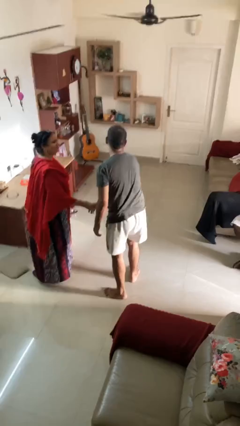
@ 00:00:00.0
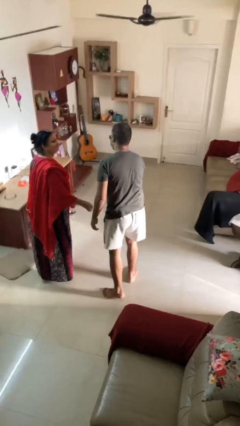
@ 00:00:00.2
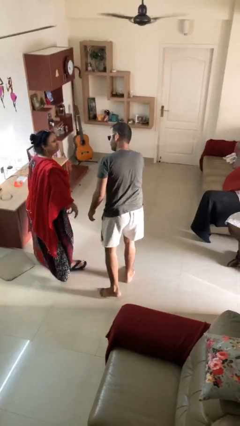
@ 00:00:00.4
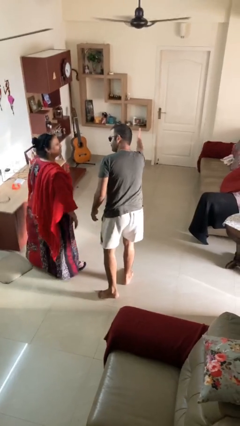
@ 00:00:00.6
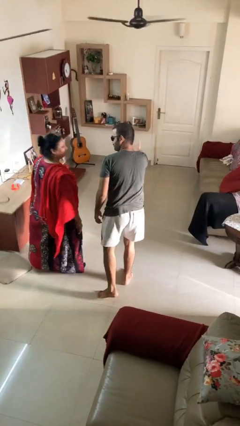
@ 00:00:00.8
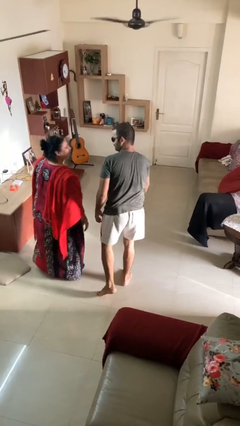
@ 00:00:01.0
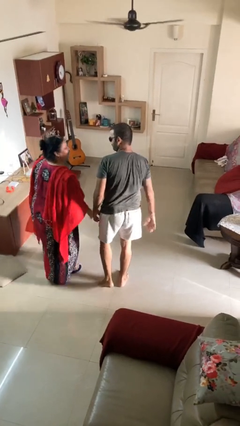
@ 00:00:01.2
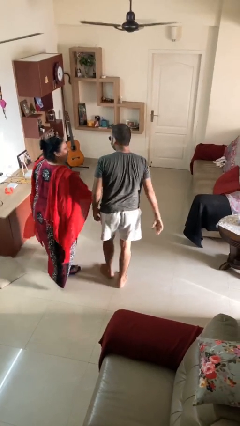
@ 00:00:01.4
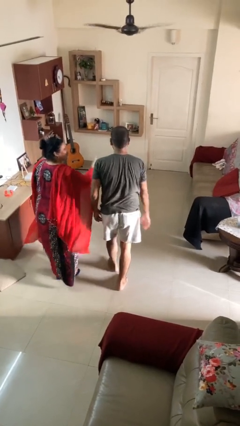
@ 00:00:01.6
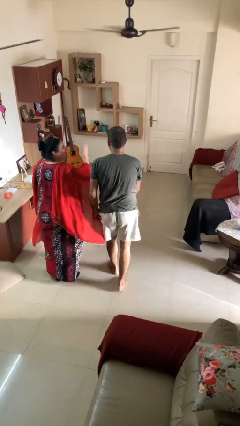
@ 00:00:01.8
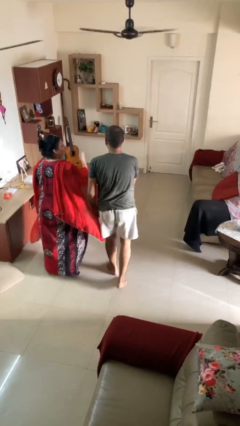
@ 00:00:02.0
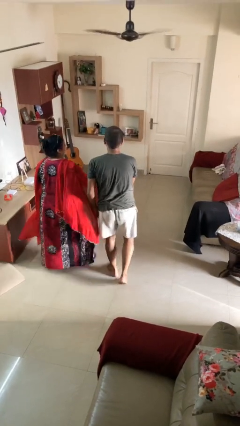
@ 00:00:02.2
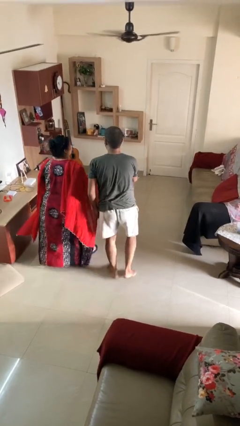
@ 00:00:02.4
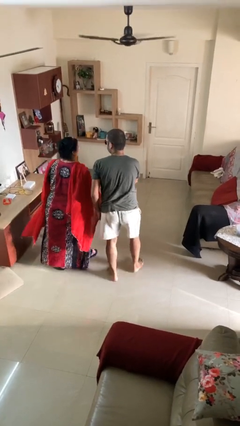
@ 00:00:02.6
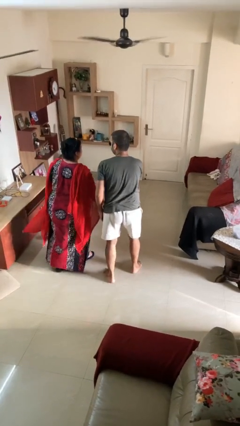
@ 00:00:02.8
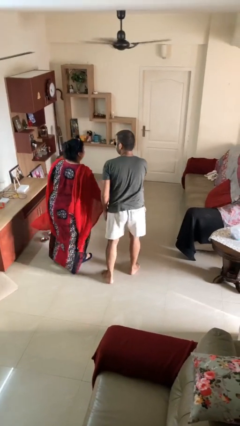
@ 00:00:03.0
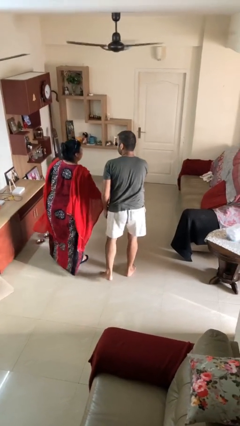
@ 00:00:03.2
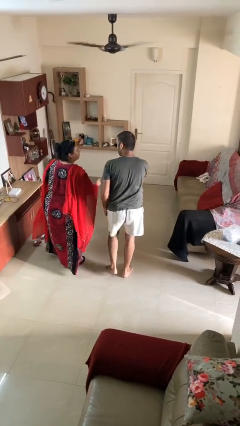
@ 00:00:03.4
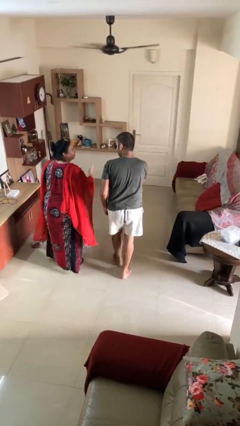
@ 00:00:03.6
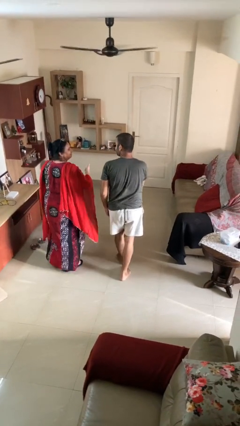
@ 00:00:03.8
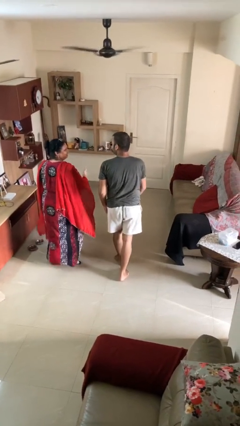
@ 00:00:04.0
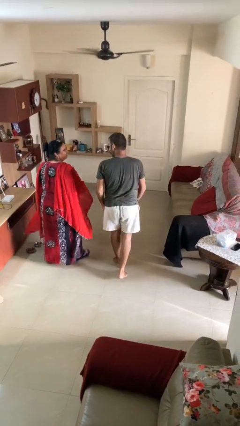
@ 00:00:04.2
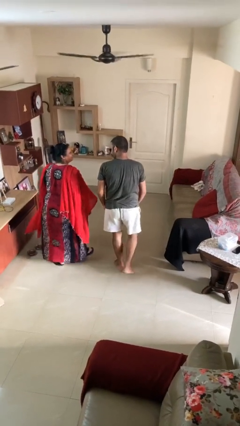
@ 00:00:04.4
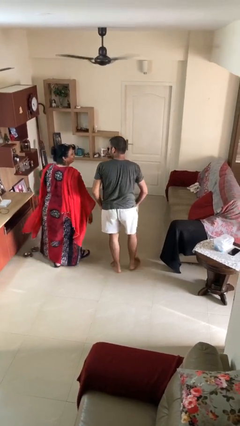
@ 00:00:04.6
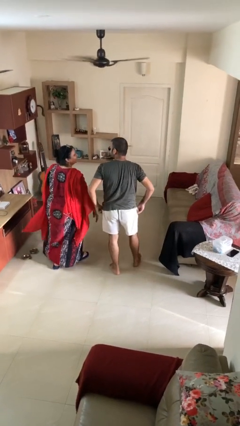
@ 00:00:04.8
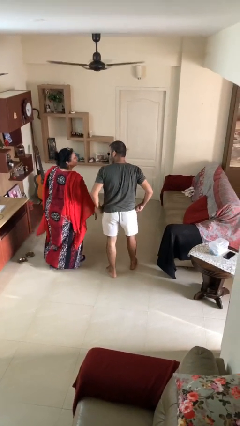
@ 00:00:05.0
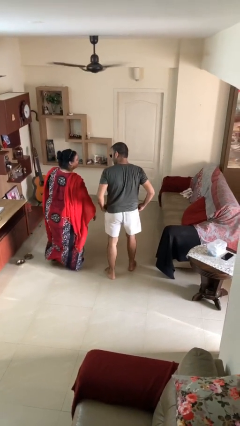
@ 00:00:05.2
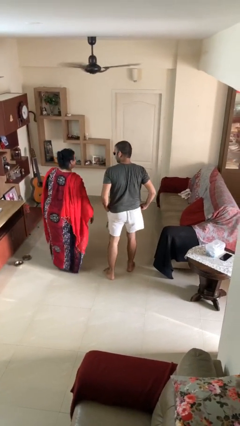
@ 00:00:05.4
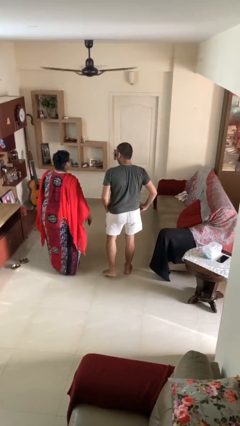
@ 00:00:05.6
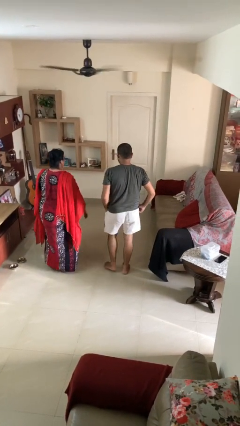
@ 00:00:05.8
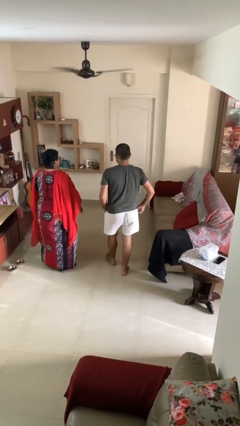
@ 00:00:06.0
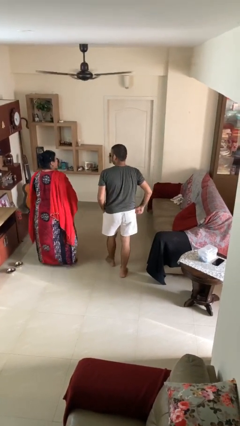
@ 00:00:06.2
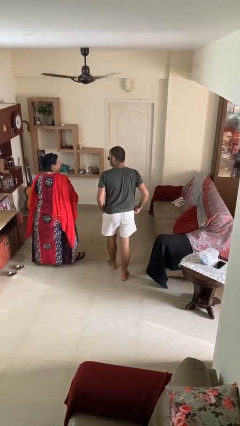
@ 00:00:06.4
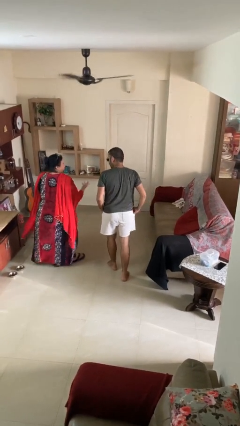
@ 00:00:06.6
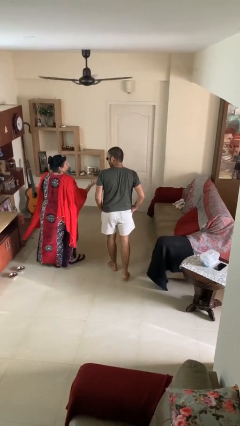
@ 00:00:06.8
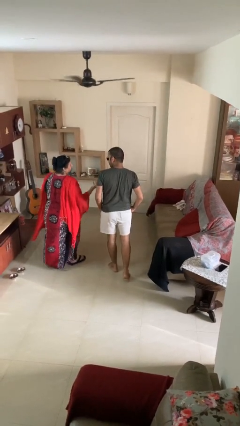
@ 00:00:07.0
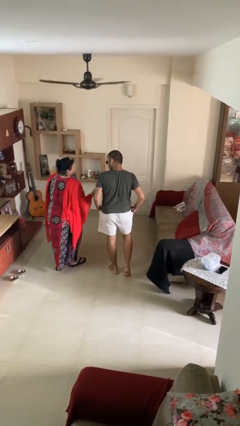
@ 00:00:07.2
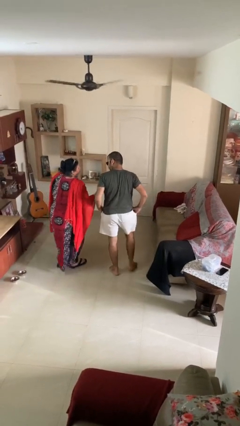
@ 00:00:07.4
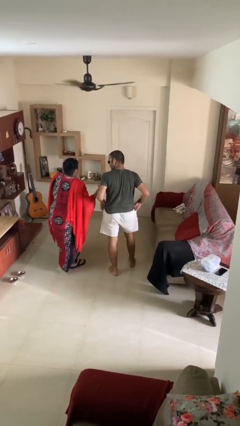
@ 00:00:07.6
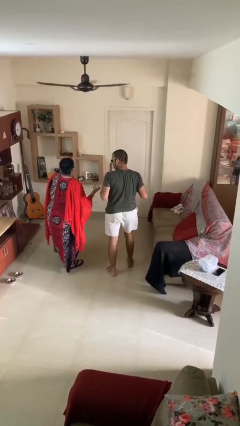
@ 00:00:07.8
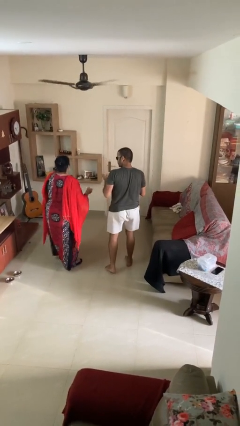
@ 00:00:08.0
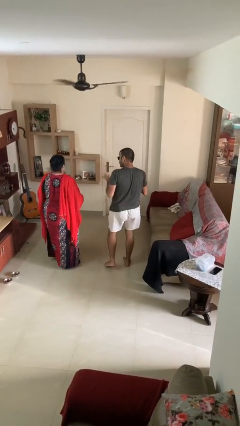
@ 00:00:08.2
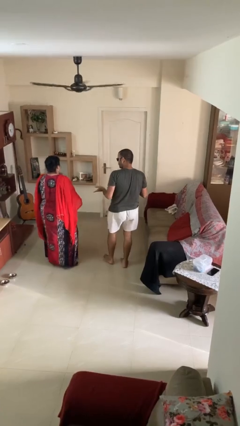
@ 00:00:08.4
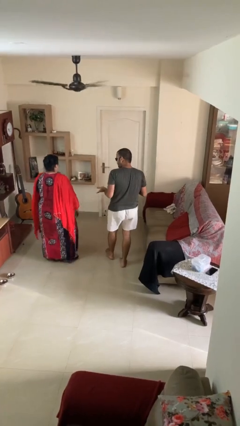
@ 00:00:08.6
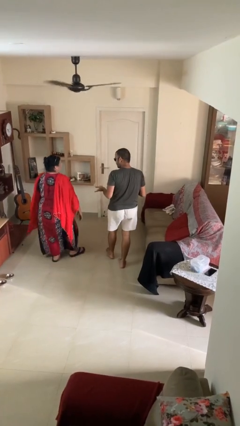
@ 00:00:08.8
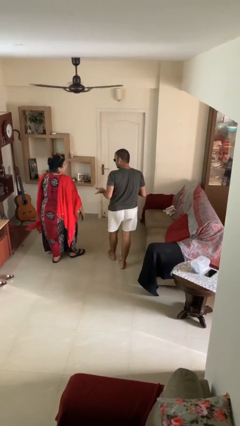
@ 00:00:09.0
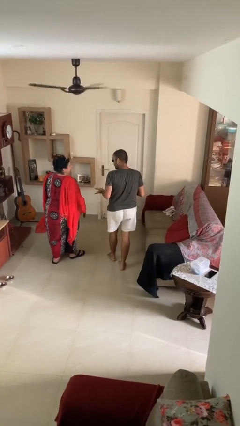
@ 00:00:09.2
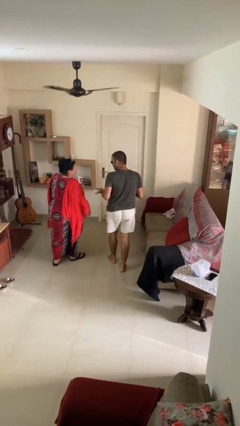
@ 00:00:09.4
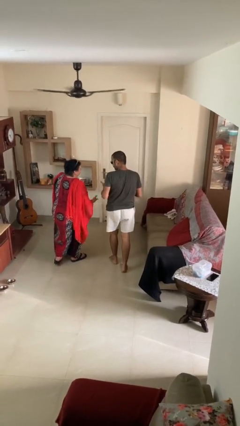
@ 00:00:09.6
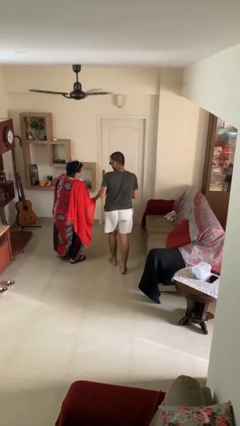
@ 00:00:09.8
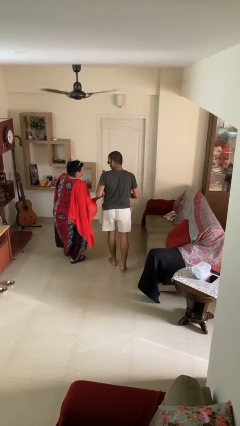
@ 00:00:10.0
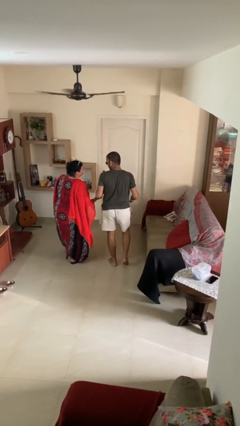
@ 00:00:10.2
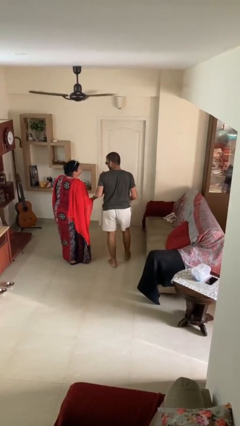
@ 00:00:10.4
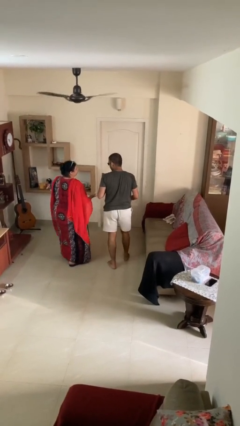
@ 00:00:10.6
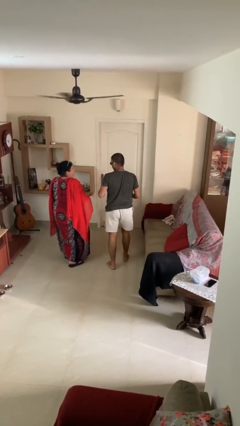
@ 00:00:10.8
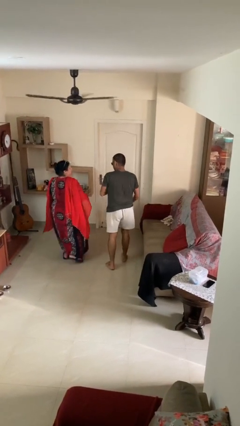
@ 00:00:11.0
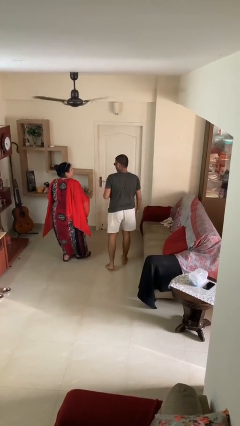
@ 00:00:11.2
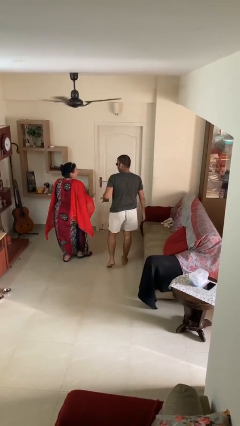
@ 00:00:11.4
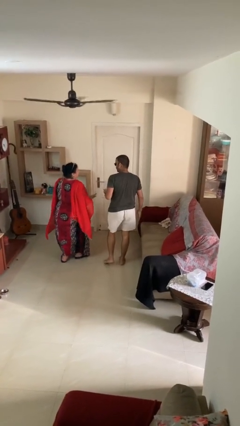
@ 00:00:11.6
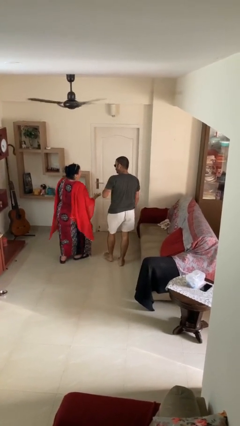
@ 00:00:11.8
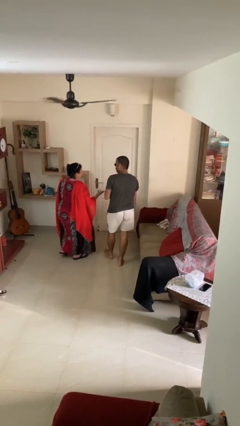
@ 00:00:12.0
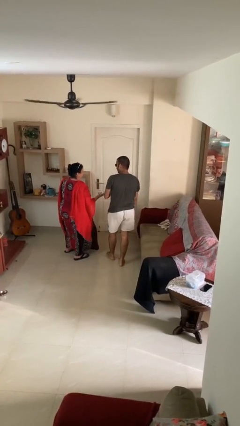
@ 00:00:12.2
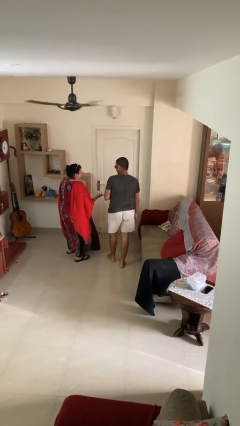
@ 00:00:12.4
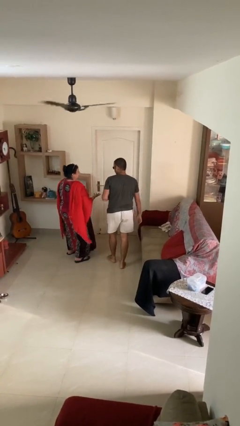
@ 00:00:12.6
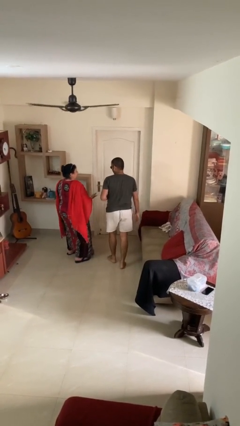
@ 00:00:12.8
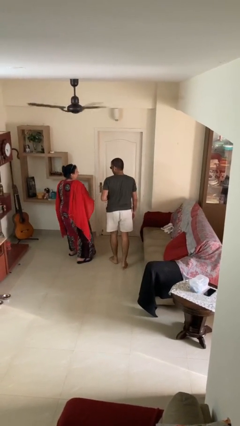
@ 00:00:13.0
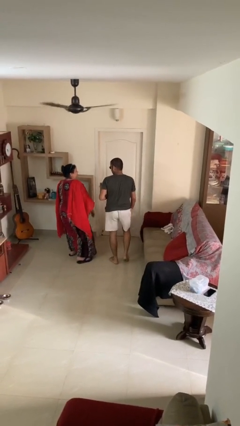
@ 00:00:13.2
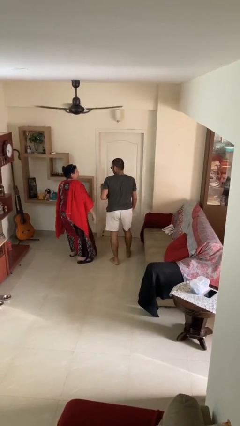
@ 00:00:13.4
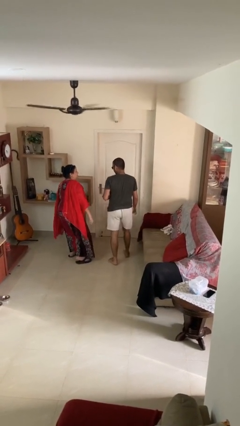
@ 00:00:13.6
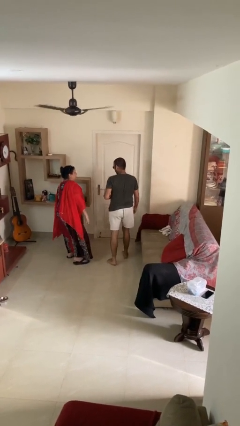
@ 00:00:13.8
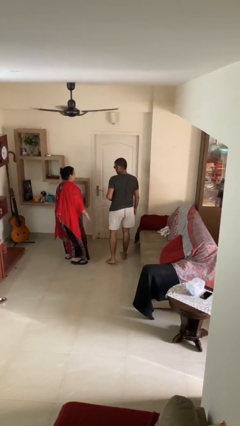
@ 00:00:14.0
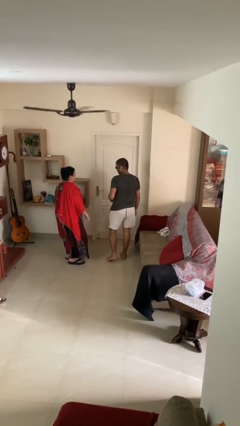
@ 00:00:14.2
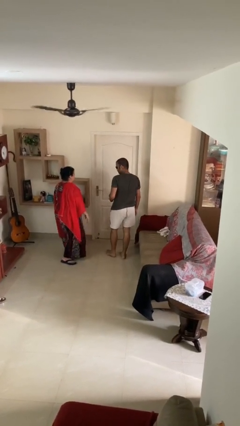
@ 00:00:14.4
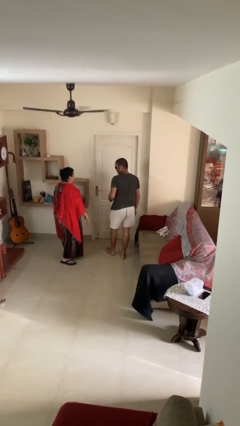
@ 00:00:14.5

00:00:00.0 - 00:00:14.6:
person talks to person

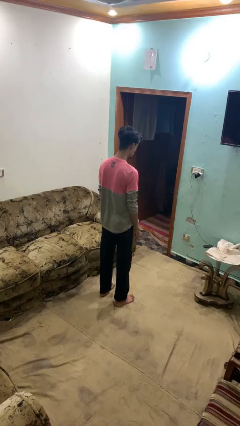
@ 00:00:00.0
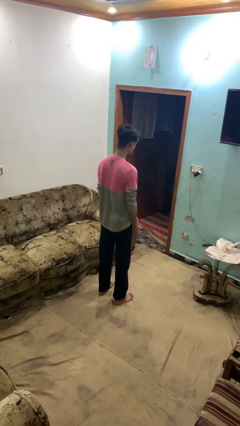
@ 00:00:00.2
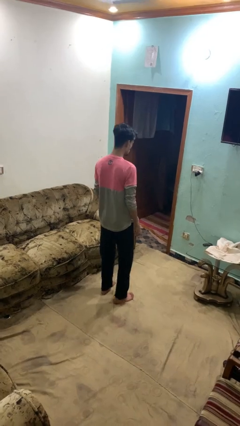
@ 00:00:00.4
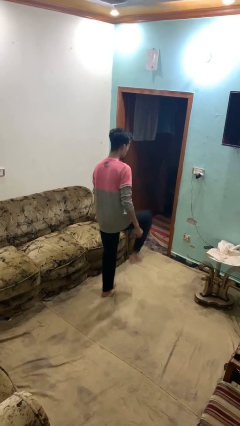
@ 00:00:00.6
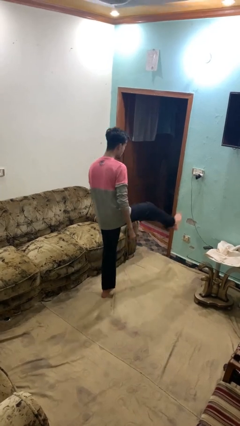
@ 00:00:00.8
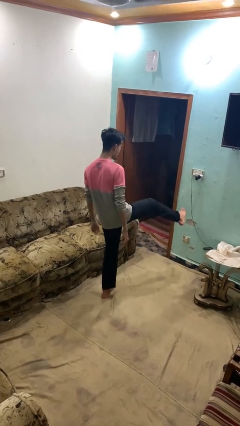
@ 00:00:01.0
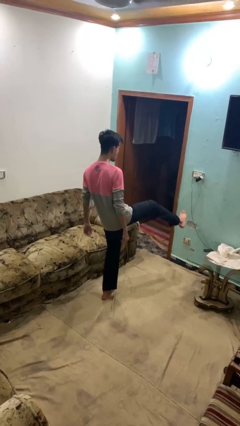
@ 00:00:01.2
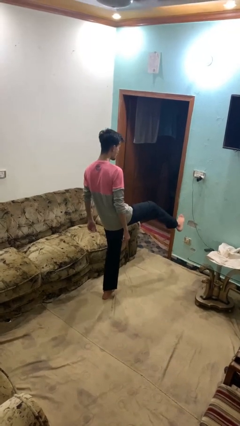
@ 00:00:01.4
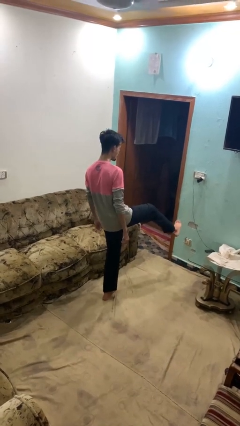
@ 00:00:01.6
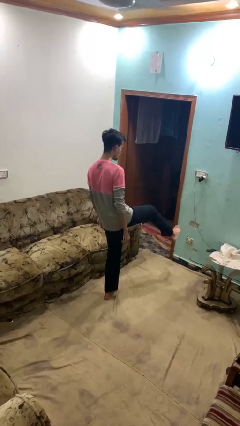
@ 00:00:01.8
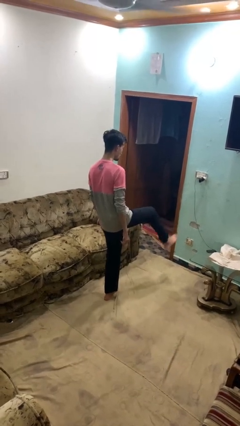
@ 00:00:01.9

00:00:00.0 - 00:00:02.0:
person karate kicks

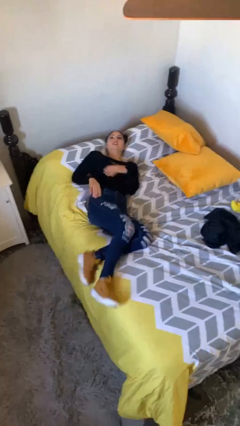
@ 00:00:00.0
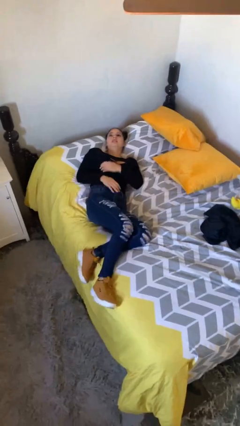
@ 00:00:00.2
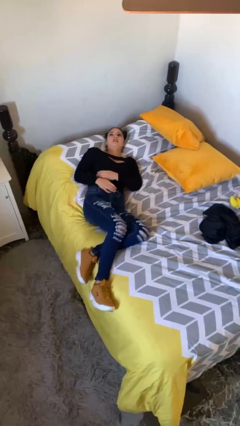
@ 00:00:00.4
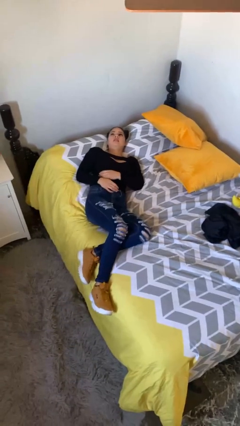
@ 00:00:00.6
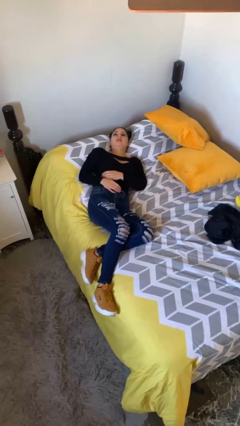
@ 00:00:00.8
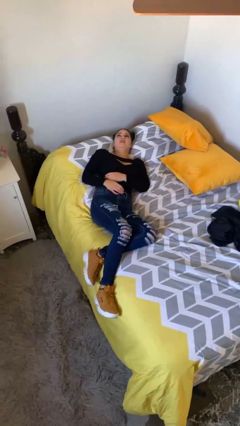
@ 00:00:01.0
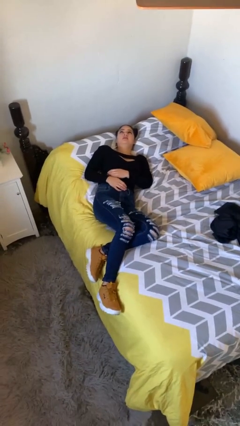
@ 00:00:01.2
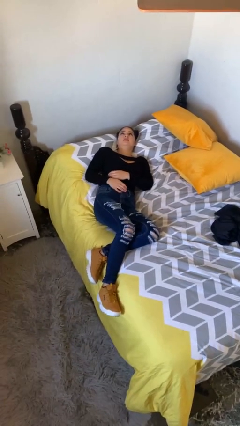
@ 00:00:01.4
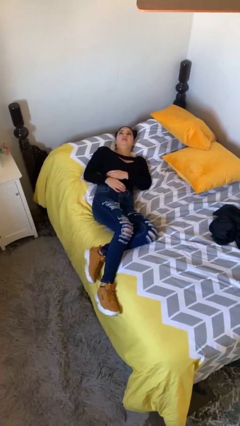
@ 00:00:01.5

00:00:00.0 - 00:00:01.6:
person lies down on bed
